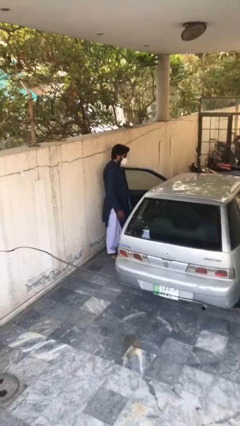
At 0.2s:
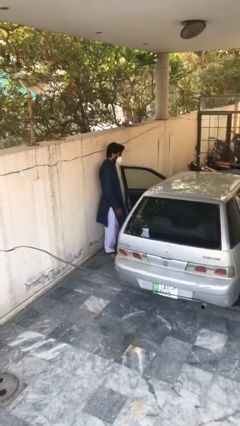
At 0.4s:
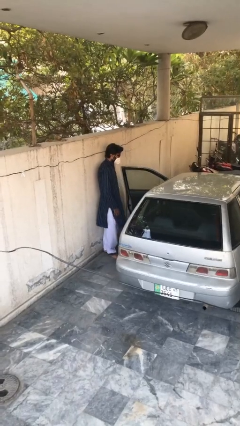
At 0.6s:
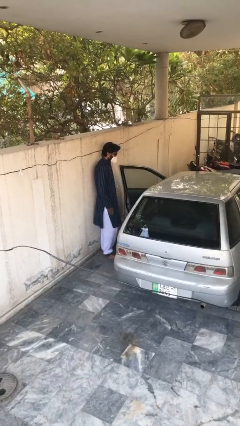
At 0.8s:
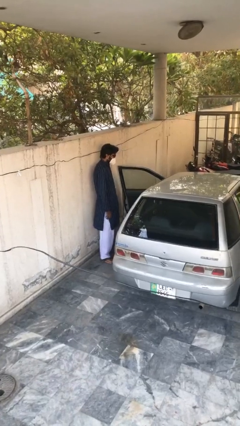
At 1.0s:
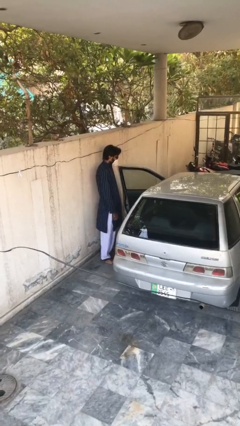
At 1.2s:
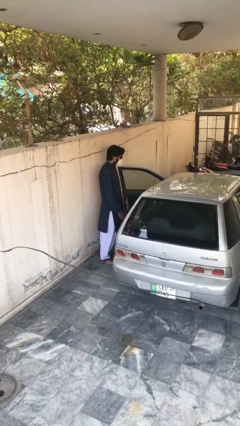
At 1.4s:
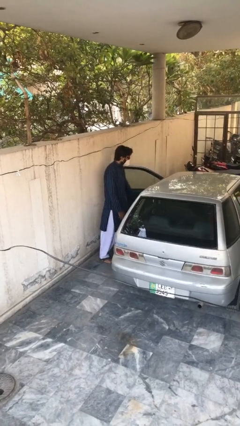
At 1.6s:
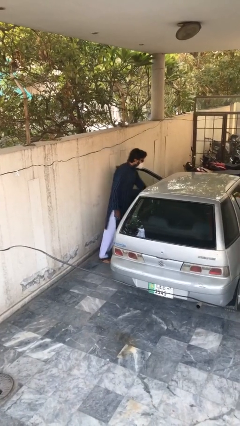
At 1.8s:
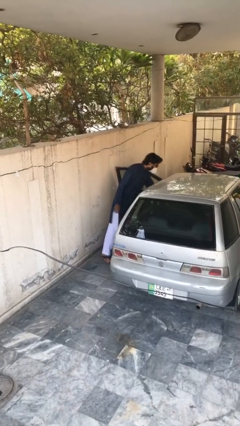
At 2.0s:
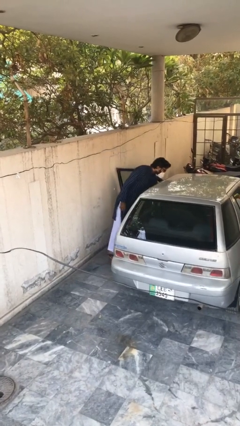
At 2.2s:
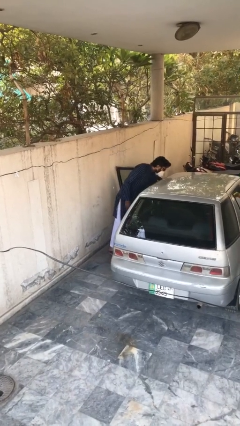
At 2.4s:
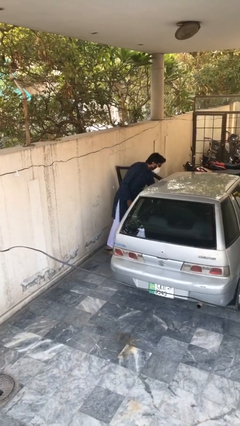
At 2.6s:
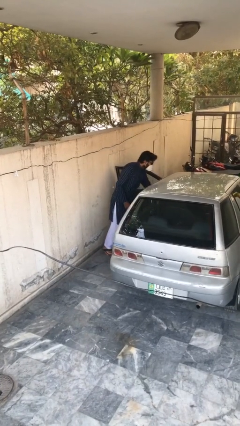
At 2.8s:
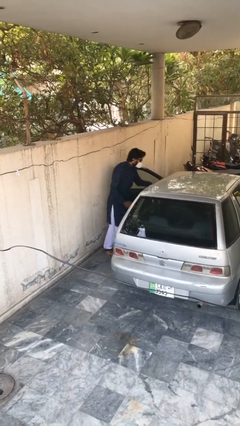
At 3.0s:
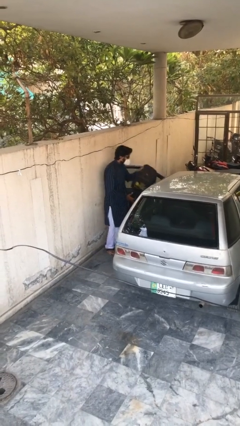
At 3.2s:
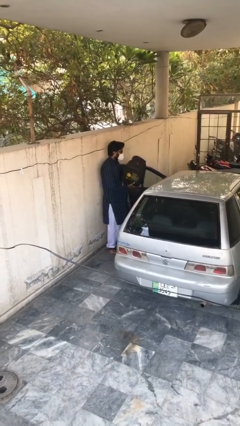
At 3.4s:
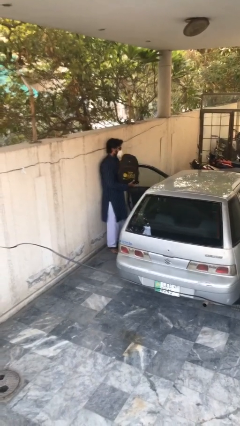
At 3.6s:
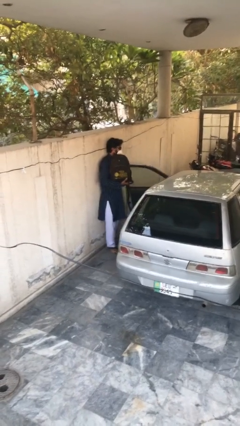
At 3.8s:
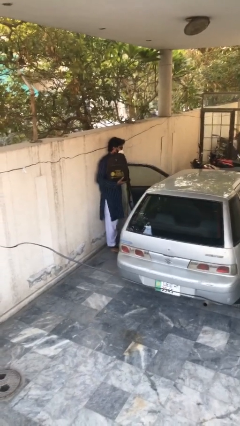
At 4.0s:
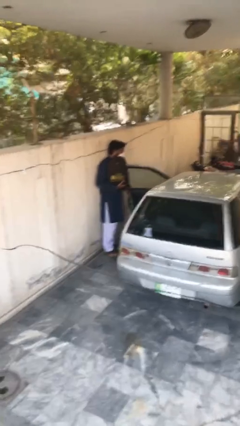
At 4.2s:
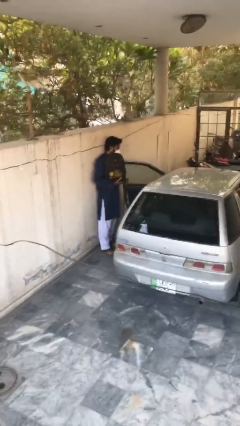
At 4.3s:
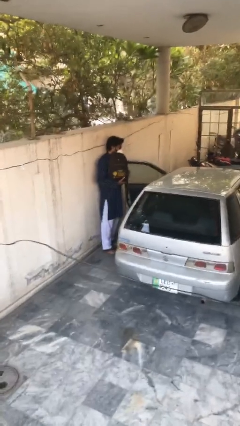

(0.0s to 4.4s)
person unloads car

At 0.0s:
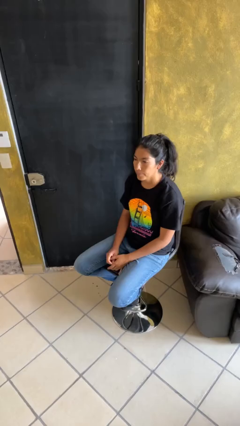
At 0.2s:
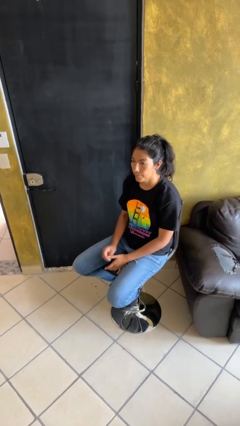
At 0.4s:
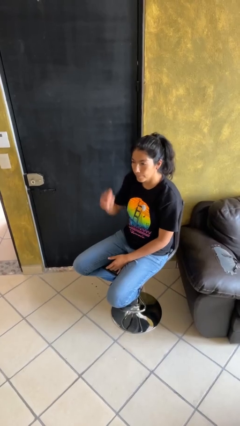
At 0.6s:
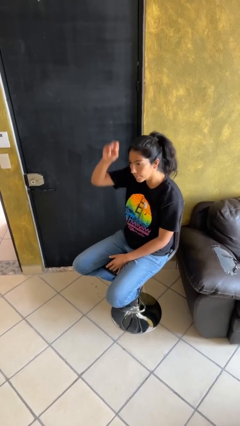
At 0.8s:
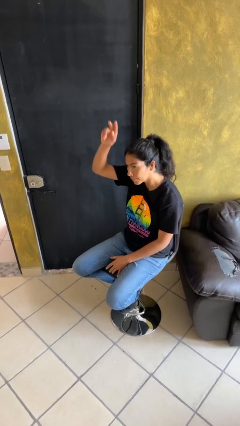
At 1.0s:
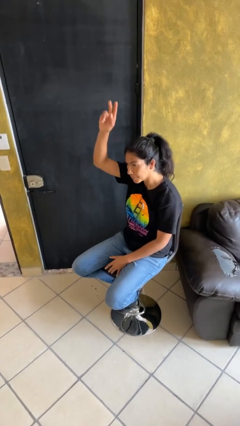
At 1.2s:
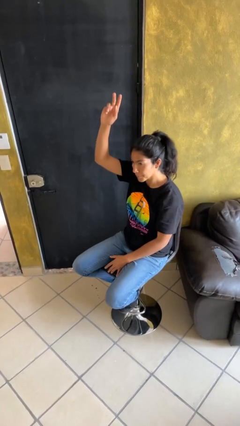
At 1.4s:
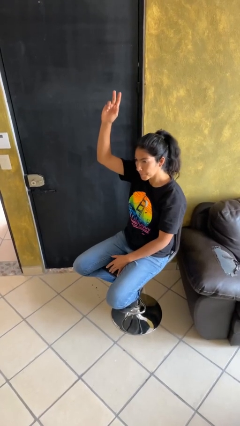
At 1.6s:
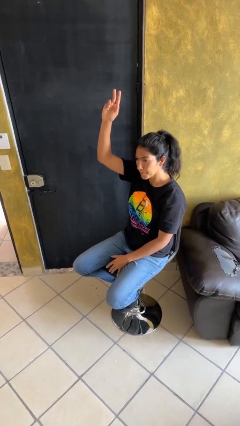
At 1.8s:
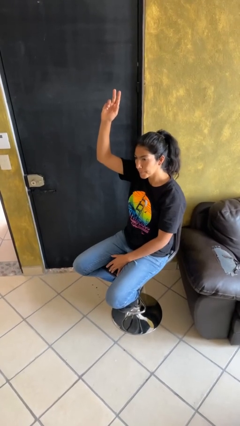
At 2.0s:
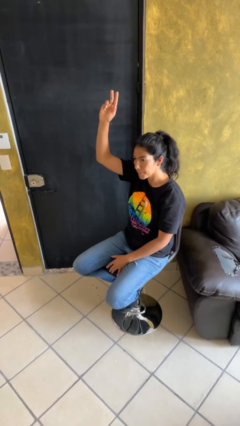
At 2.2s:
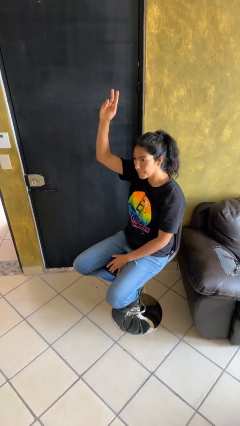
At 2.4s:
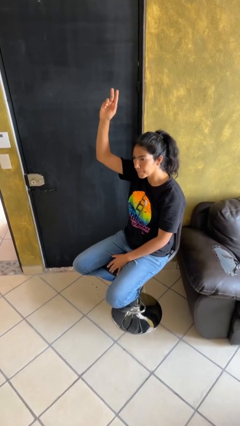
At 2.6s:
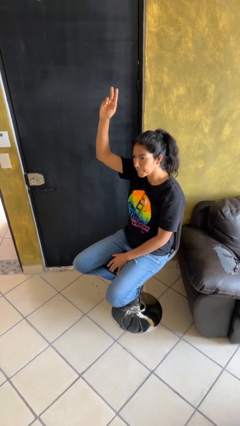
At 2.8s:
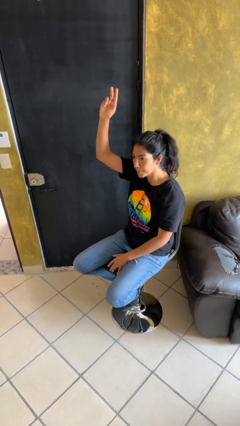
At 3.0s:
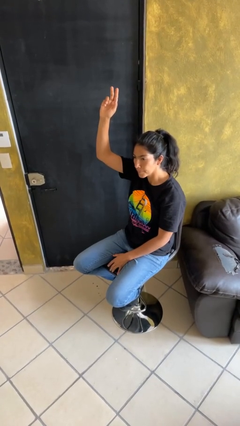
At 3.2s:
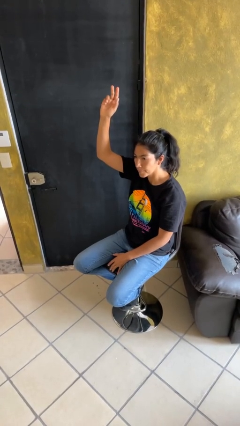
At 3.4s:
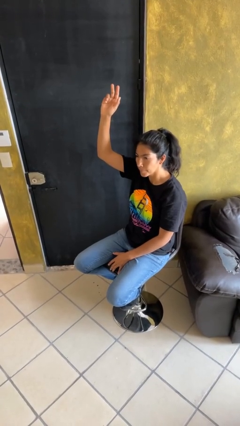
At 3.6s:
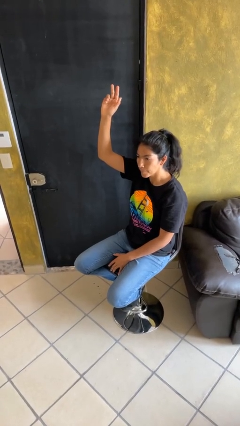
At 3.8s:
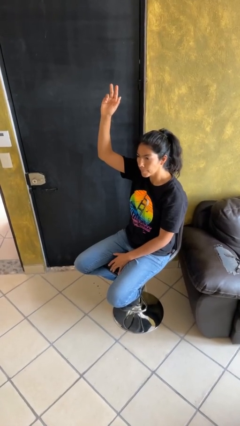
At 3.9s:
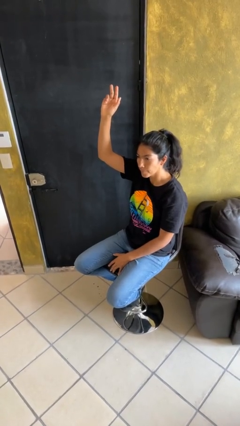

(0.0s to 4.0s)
person gestures raise hand

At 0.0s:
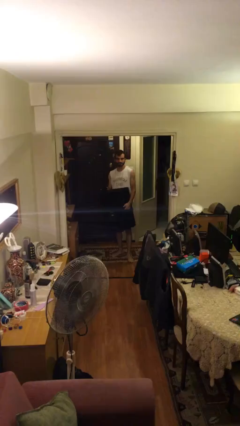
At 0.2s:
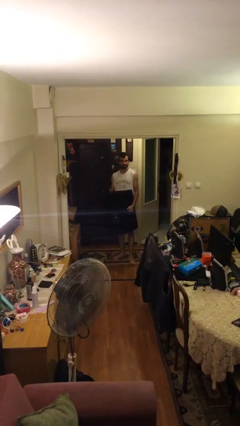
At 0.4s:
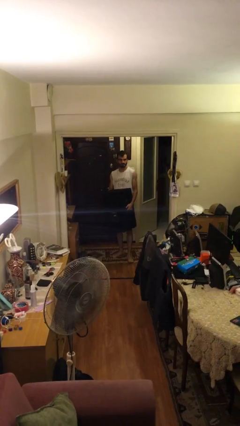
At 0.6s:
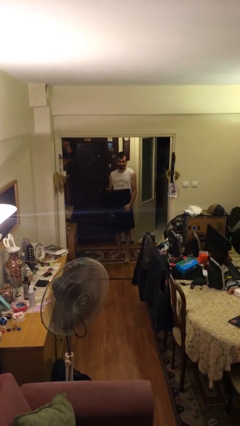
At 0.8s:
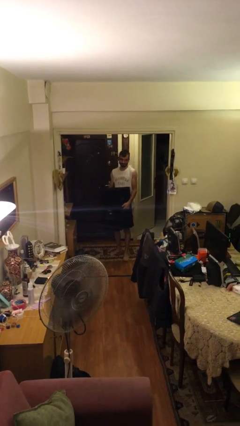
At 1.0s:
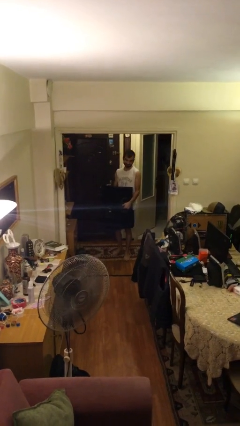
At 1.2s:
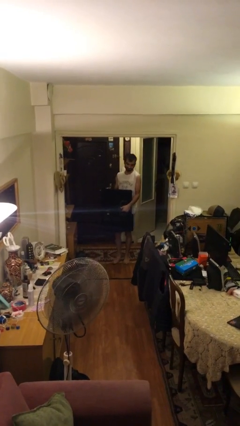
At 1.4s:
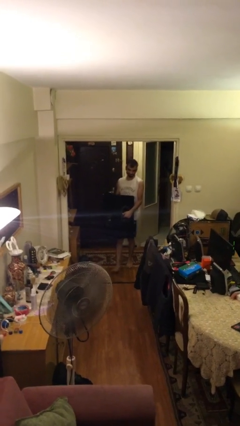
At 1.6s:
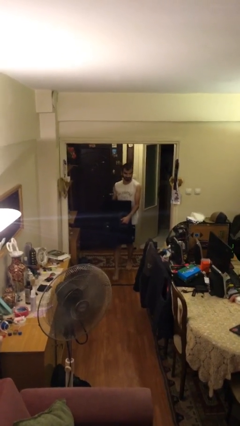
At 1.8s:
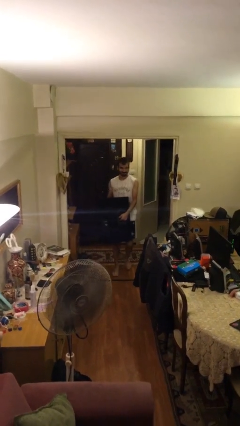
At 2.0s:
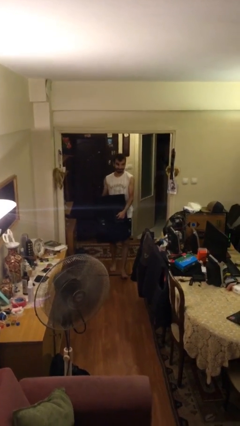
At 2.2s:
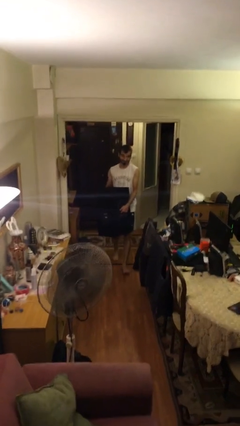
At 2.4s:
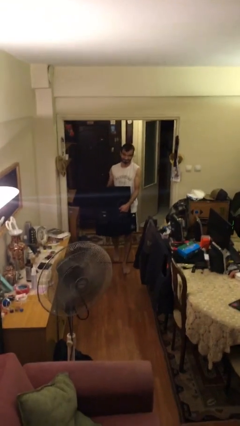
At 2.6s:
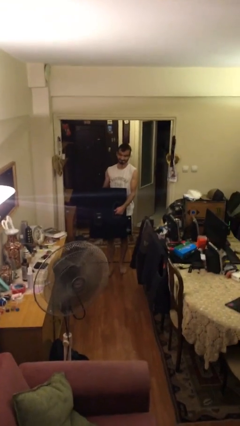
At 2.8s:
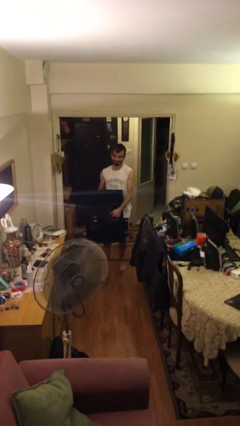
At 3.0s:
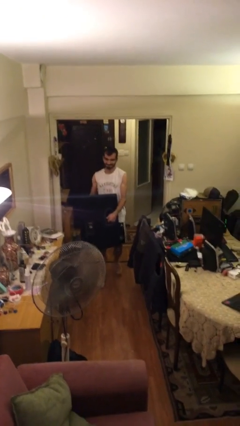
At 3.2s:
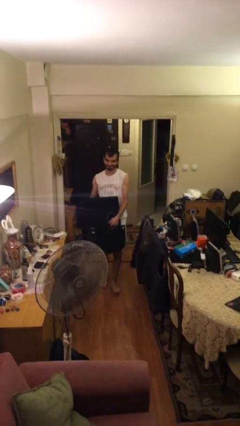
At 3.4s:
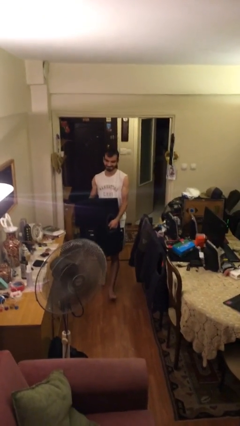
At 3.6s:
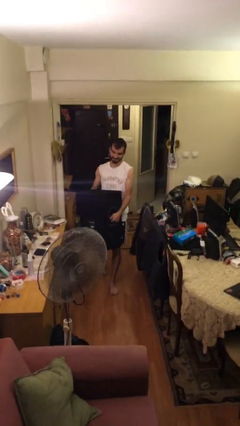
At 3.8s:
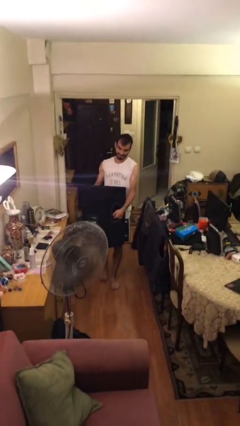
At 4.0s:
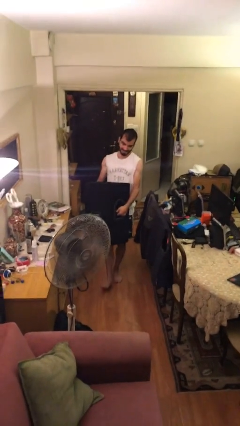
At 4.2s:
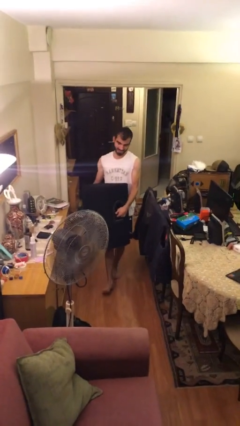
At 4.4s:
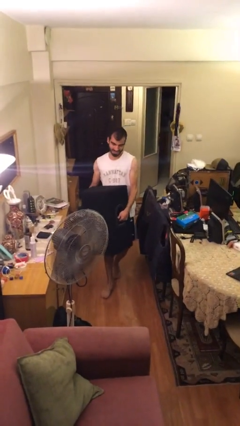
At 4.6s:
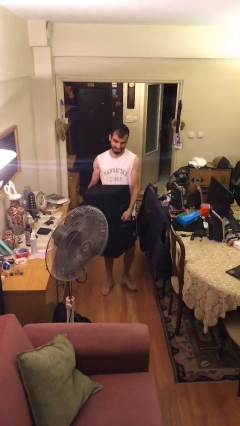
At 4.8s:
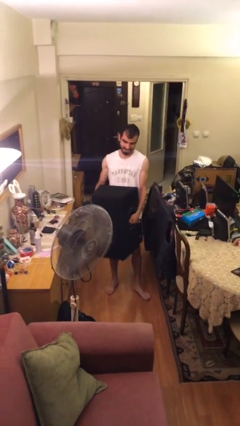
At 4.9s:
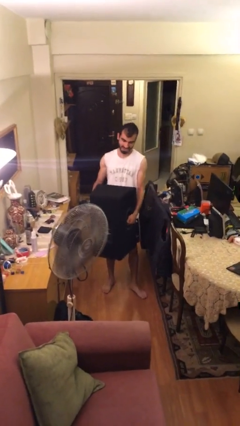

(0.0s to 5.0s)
person carries heavy object

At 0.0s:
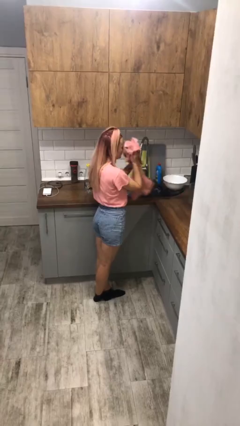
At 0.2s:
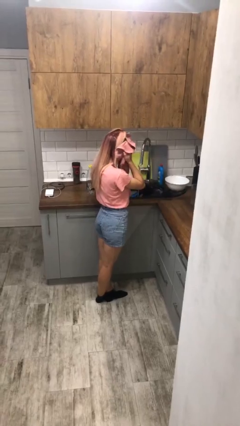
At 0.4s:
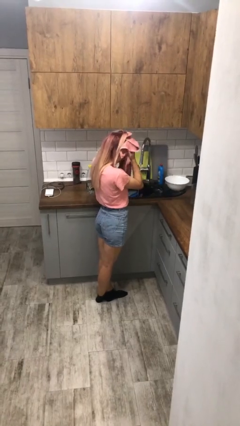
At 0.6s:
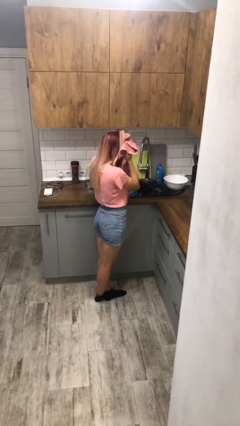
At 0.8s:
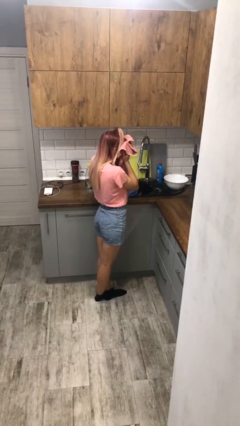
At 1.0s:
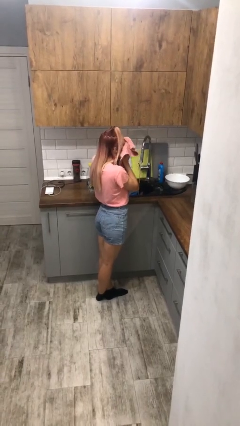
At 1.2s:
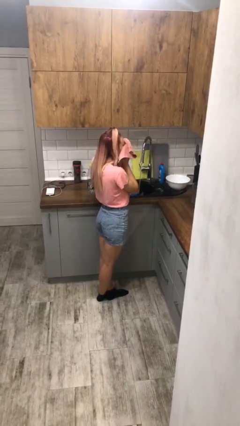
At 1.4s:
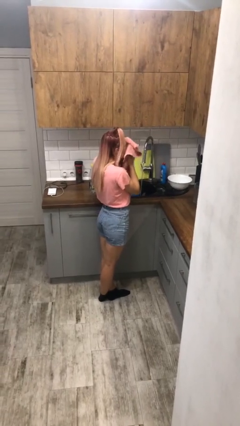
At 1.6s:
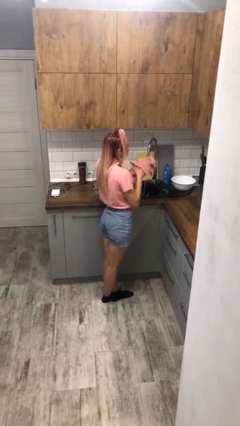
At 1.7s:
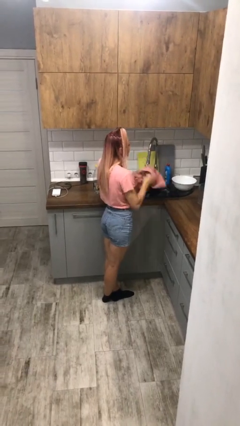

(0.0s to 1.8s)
person dries face with towel

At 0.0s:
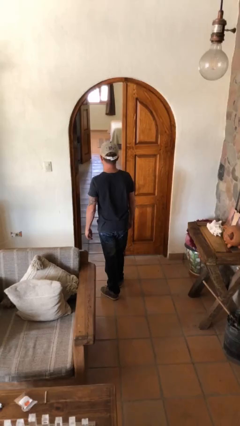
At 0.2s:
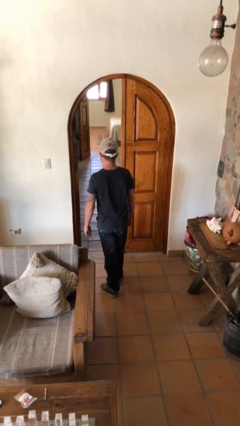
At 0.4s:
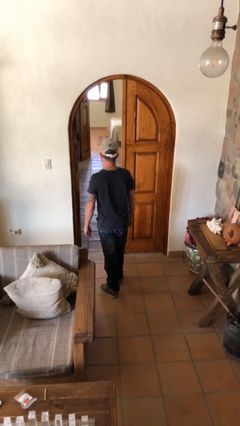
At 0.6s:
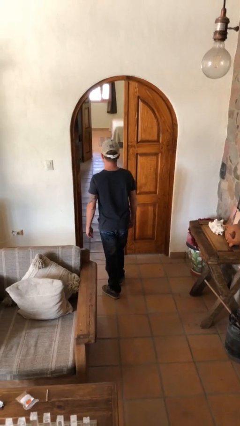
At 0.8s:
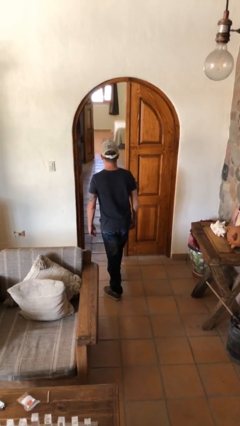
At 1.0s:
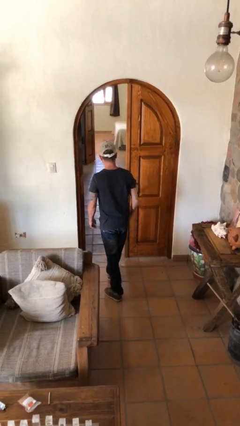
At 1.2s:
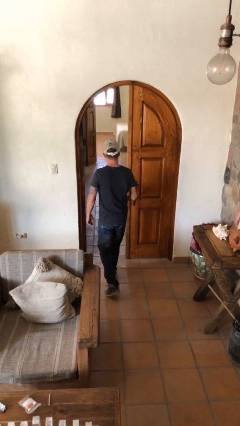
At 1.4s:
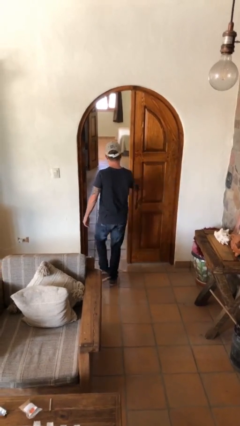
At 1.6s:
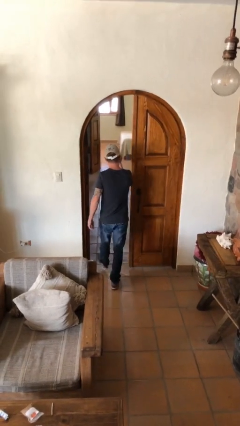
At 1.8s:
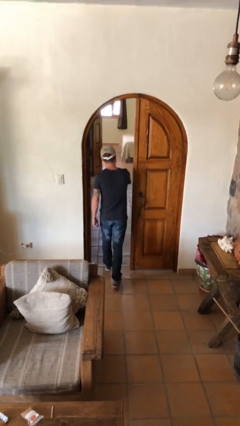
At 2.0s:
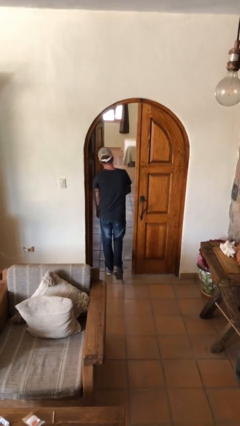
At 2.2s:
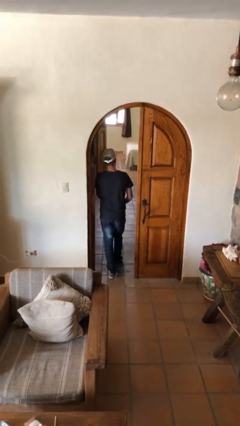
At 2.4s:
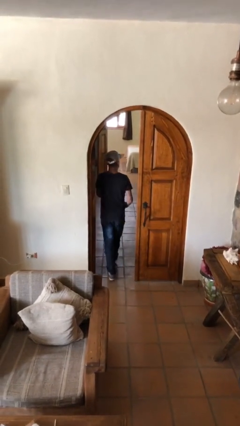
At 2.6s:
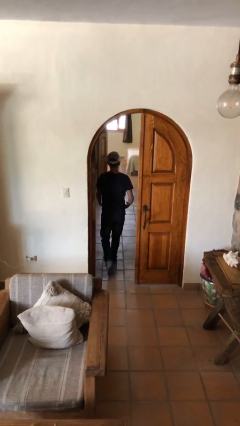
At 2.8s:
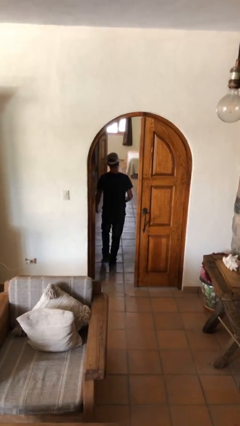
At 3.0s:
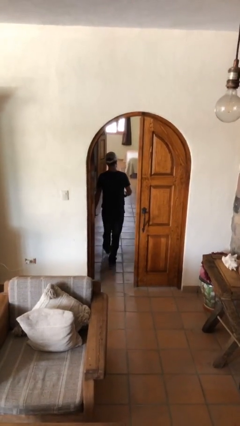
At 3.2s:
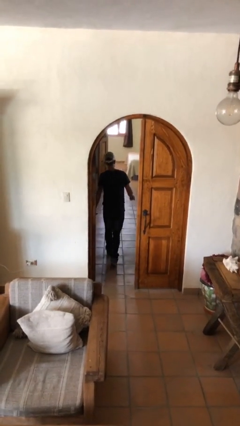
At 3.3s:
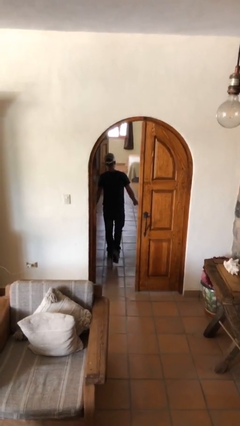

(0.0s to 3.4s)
person exits scene through structure
